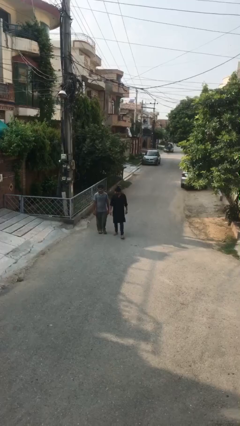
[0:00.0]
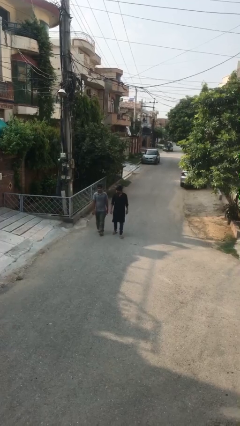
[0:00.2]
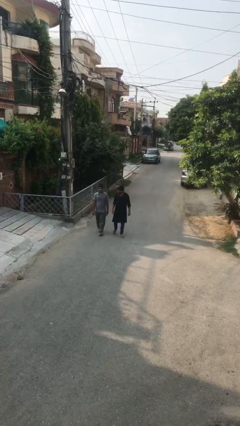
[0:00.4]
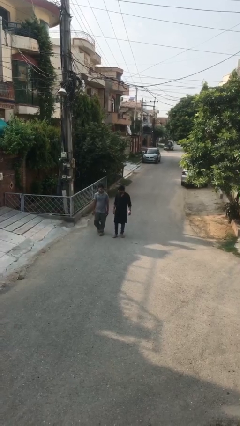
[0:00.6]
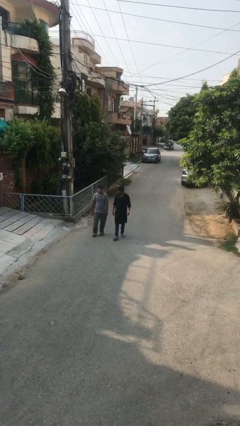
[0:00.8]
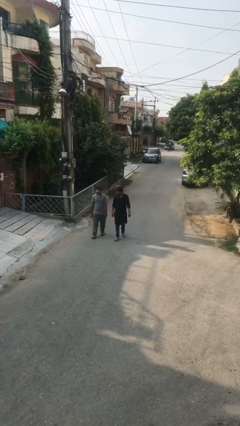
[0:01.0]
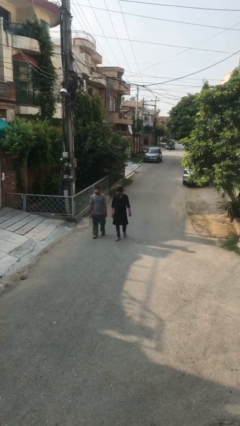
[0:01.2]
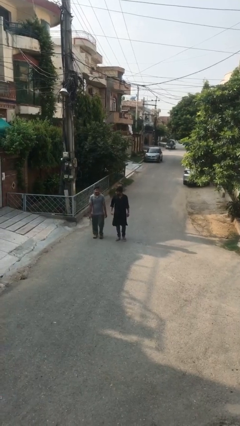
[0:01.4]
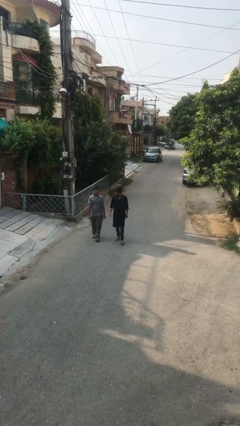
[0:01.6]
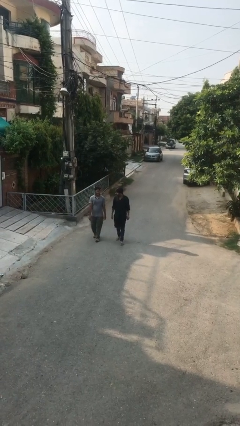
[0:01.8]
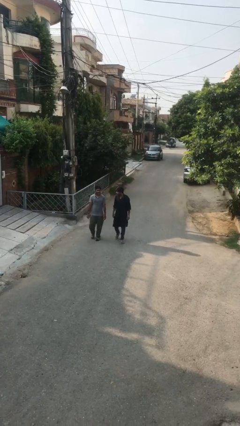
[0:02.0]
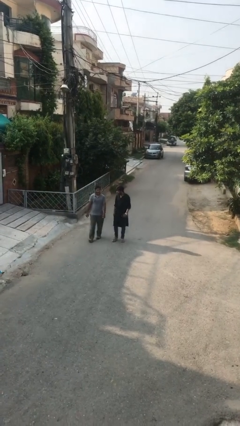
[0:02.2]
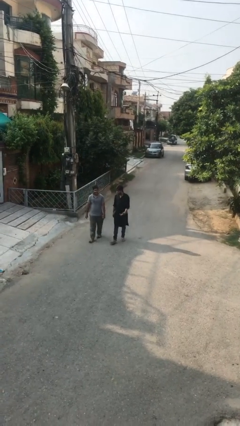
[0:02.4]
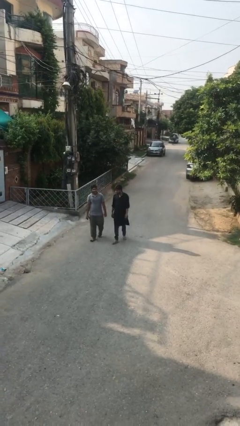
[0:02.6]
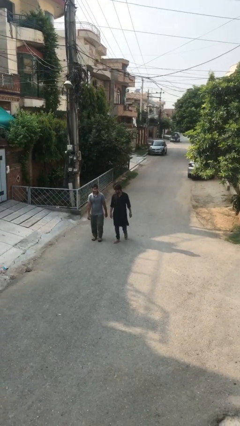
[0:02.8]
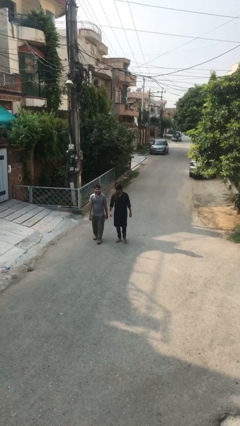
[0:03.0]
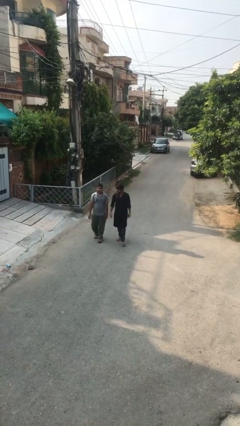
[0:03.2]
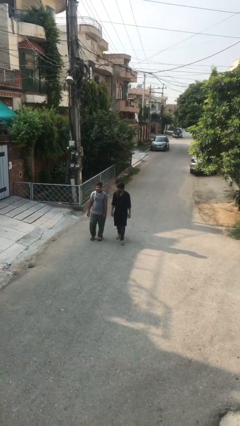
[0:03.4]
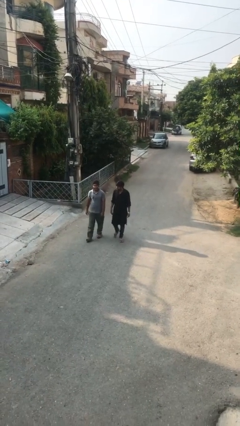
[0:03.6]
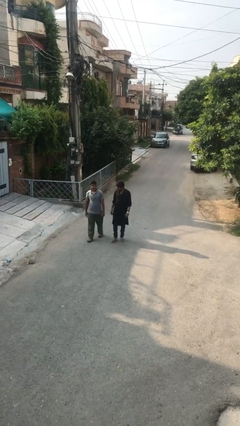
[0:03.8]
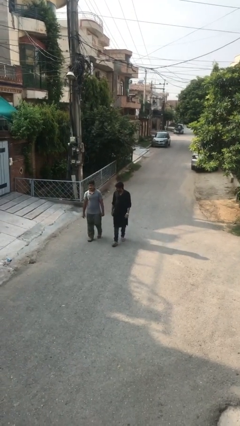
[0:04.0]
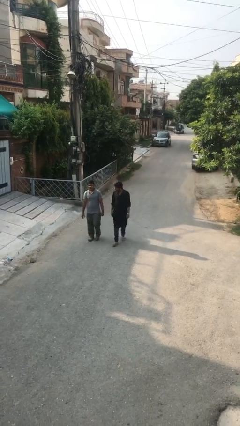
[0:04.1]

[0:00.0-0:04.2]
person talks to person

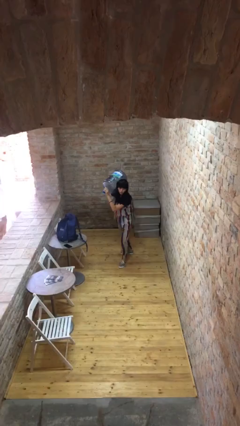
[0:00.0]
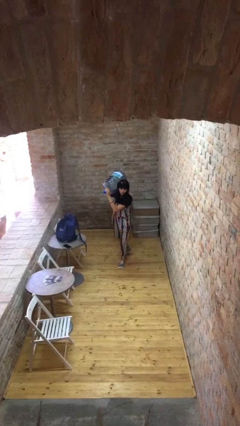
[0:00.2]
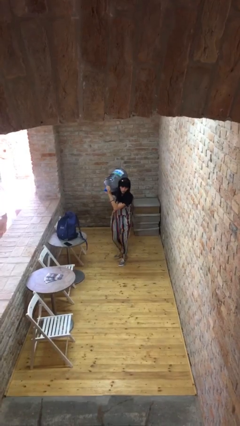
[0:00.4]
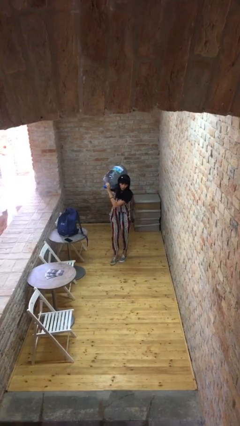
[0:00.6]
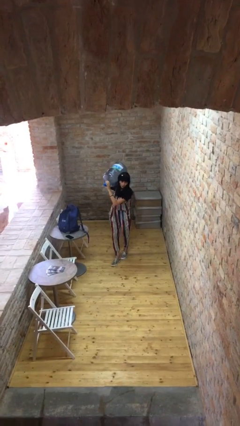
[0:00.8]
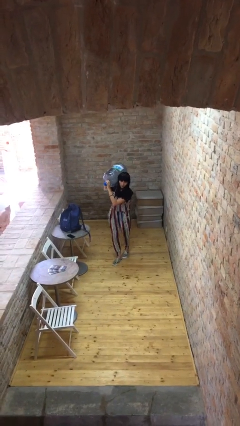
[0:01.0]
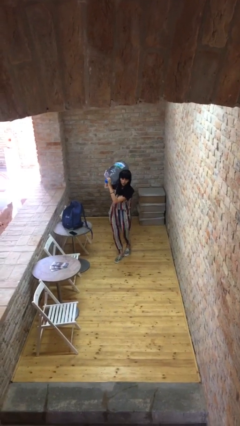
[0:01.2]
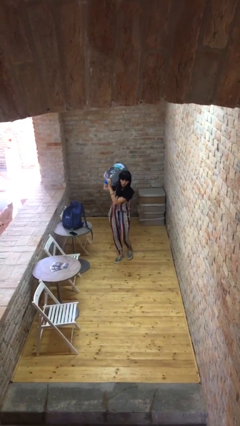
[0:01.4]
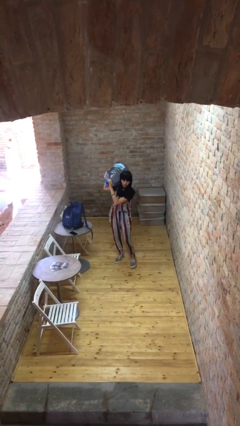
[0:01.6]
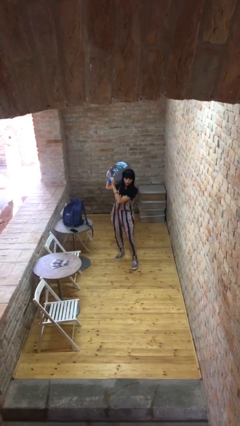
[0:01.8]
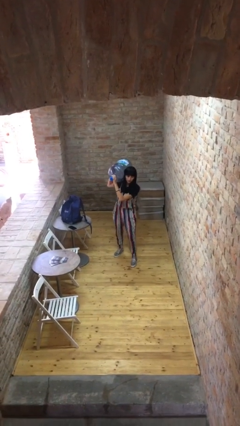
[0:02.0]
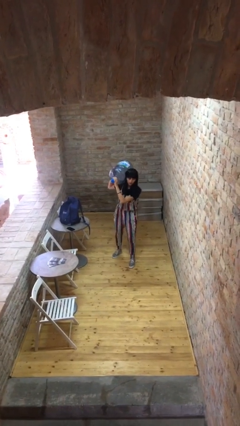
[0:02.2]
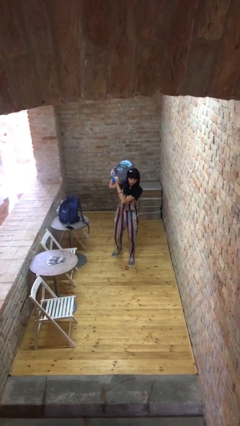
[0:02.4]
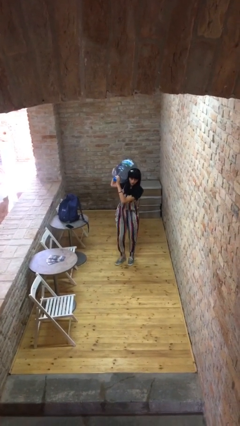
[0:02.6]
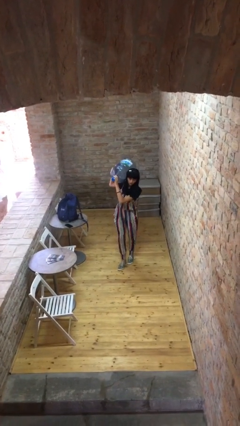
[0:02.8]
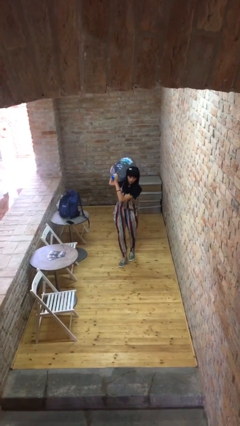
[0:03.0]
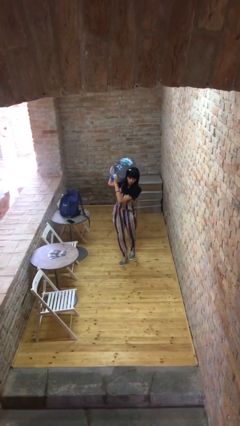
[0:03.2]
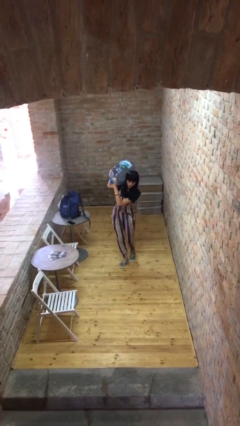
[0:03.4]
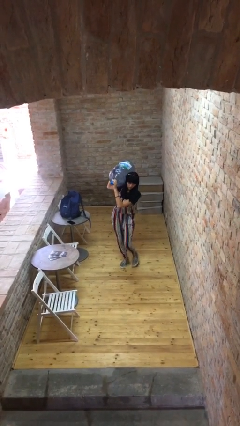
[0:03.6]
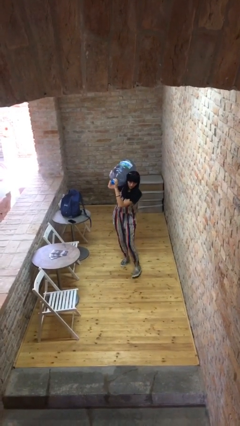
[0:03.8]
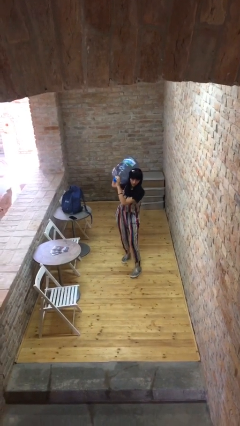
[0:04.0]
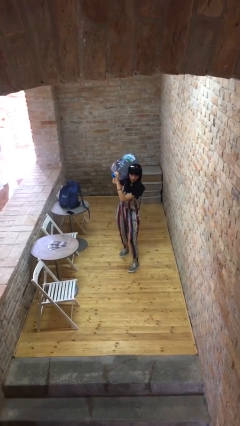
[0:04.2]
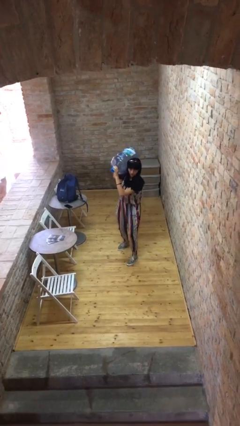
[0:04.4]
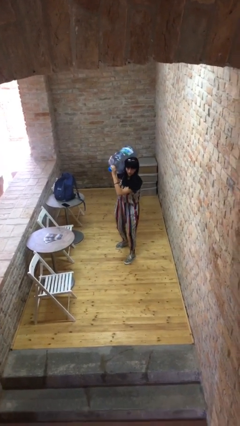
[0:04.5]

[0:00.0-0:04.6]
person carries heavy object

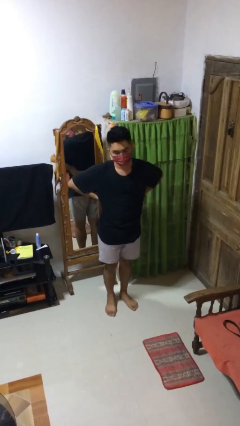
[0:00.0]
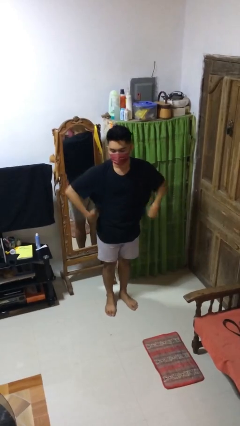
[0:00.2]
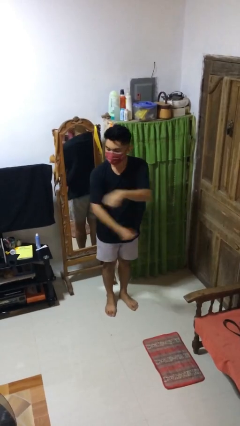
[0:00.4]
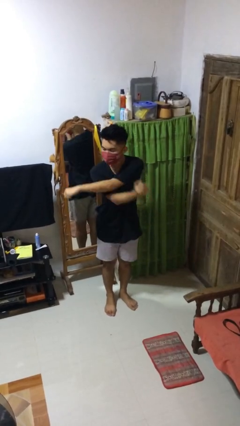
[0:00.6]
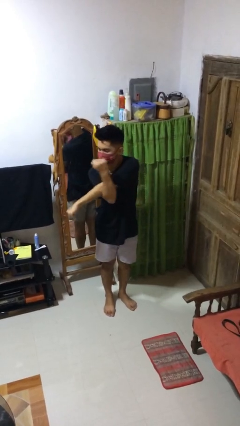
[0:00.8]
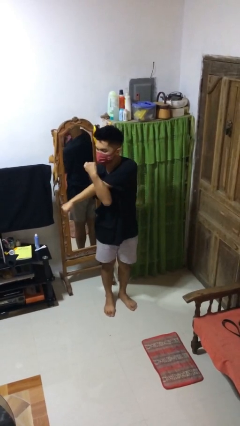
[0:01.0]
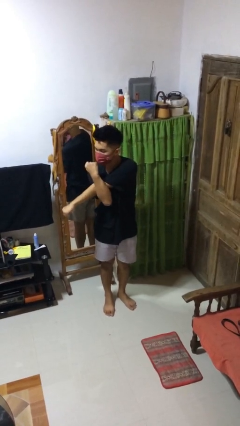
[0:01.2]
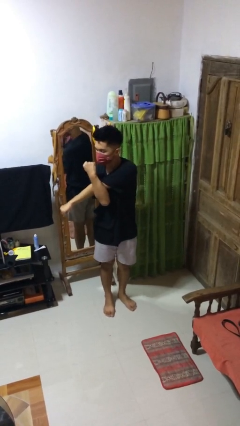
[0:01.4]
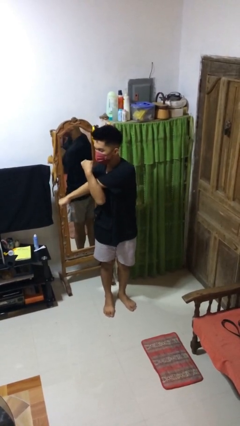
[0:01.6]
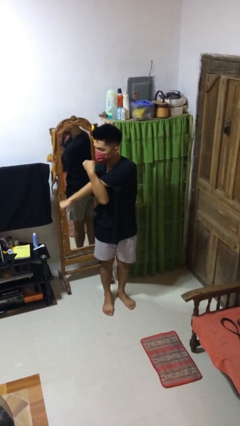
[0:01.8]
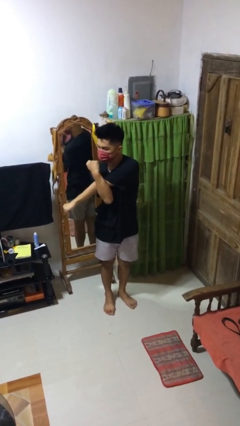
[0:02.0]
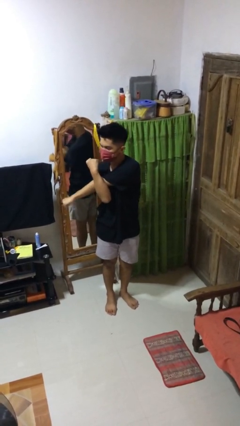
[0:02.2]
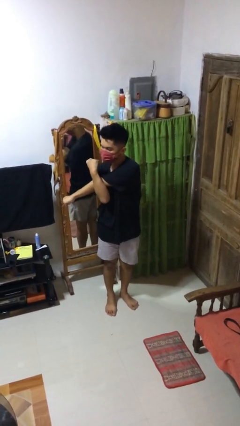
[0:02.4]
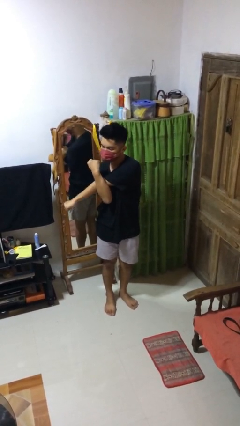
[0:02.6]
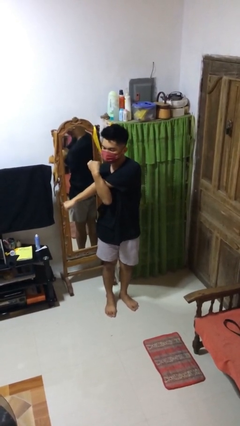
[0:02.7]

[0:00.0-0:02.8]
person stretches arms to side

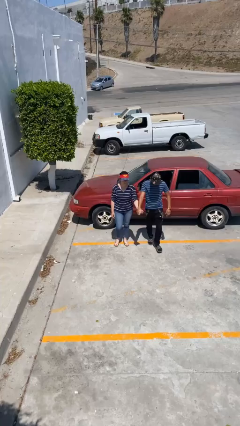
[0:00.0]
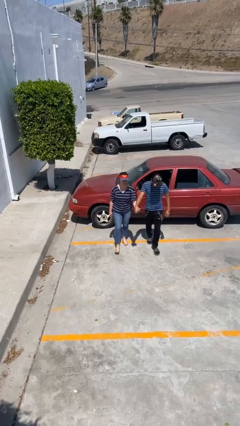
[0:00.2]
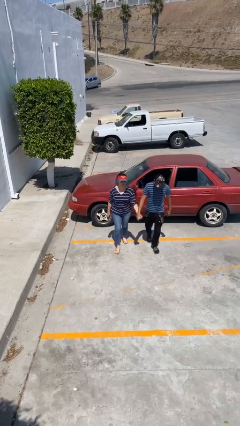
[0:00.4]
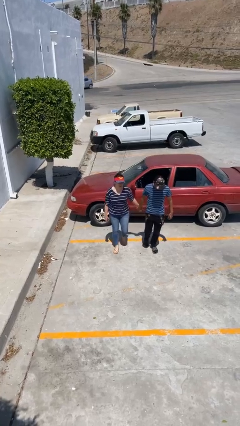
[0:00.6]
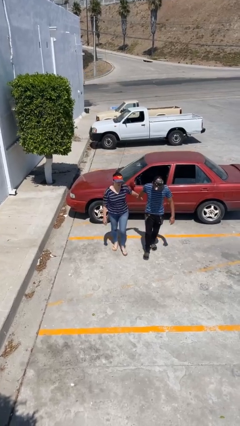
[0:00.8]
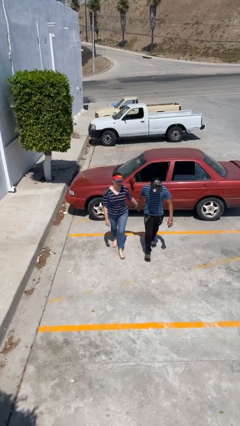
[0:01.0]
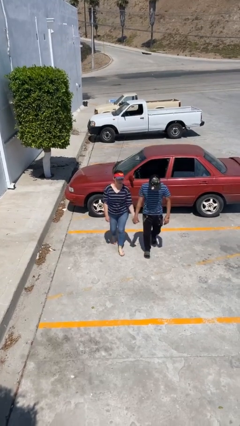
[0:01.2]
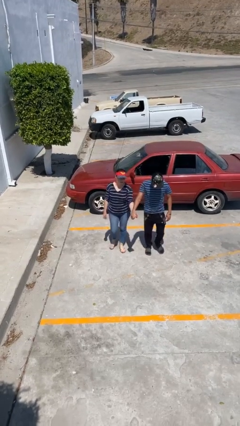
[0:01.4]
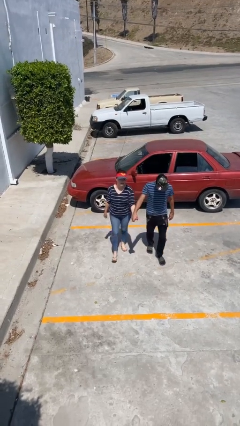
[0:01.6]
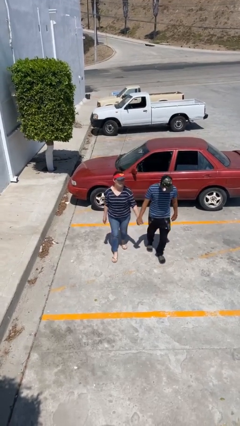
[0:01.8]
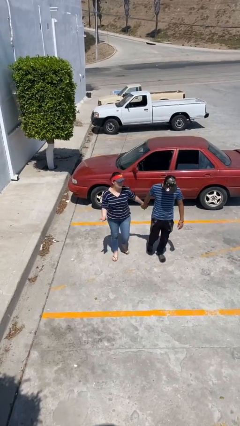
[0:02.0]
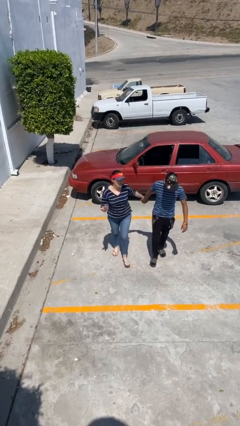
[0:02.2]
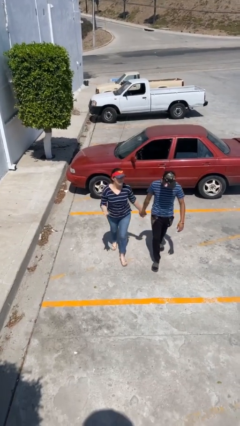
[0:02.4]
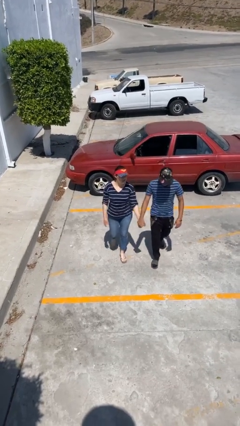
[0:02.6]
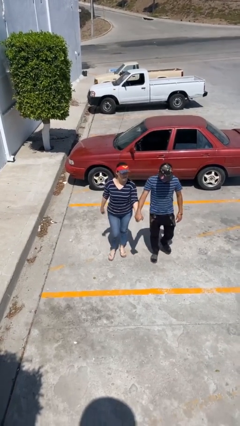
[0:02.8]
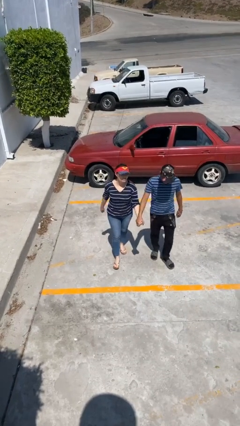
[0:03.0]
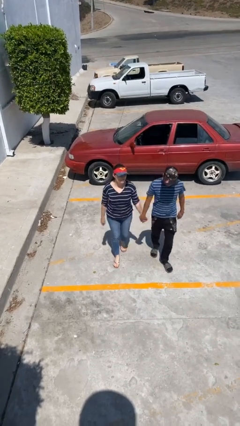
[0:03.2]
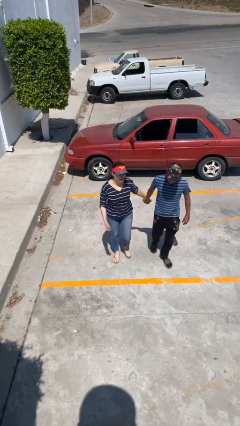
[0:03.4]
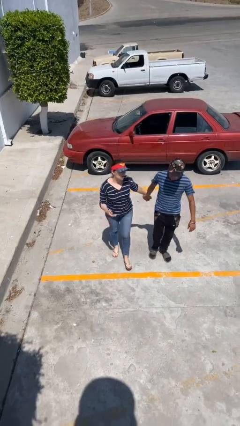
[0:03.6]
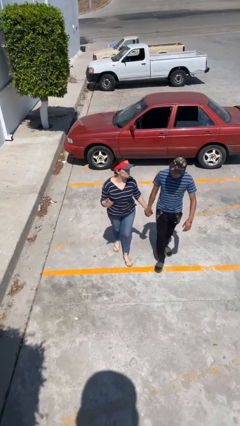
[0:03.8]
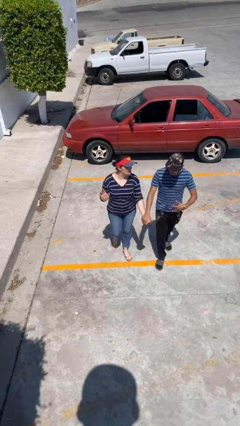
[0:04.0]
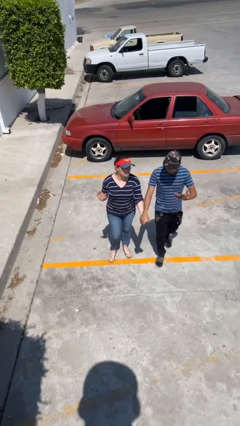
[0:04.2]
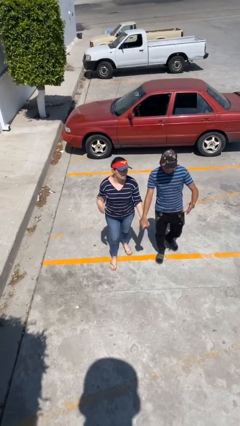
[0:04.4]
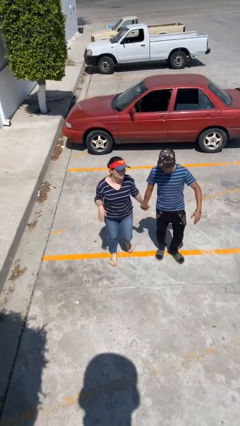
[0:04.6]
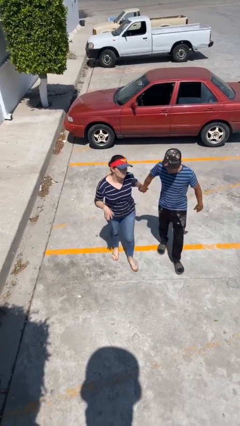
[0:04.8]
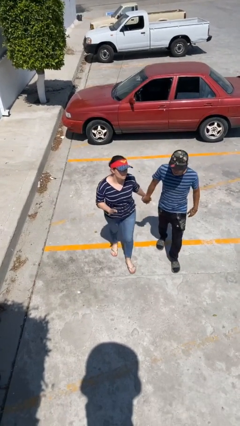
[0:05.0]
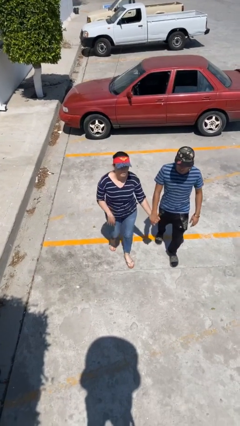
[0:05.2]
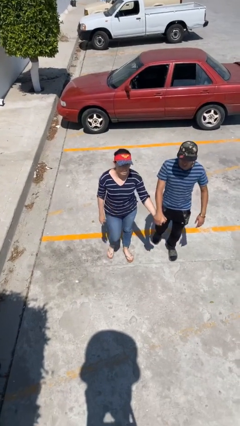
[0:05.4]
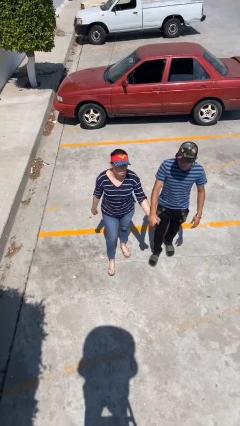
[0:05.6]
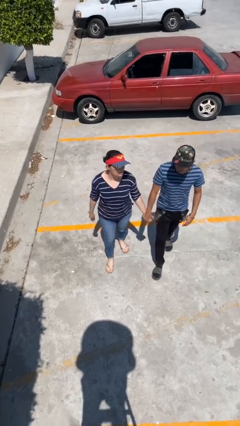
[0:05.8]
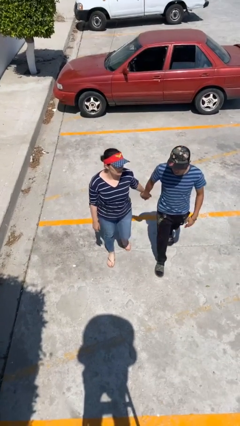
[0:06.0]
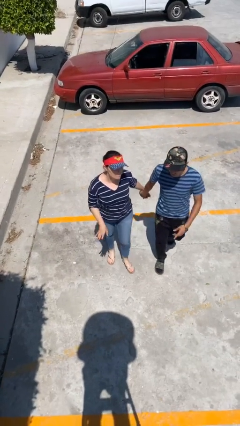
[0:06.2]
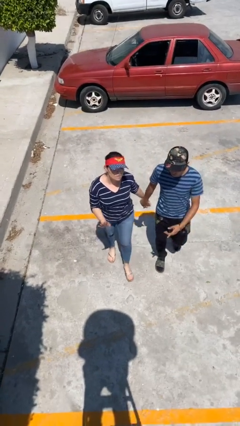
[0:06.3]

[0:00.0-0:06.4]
person holds hand
